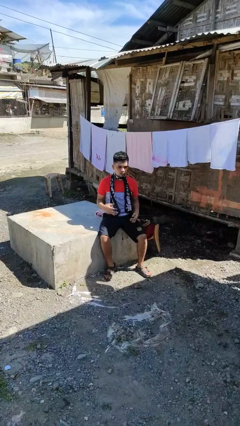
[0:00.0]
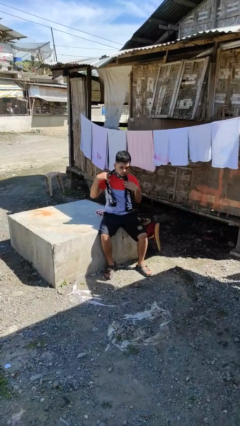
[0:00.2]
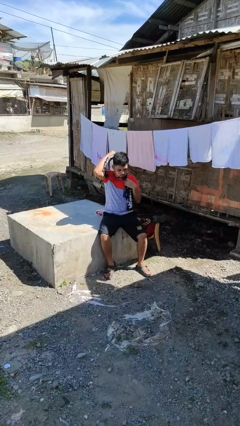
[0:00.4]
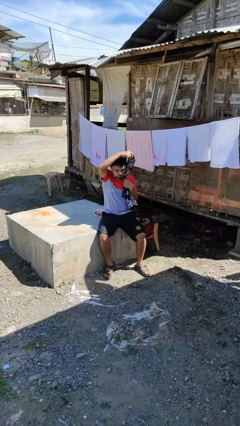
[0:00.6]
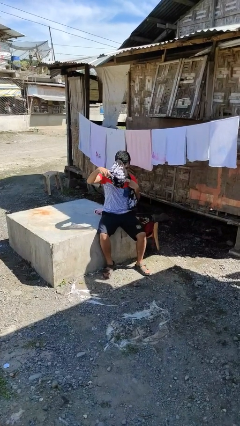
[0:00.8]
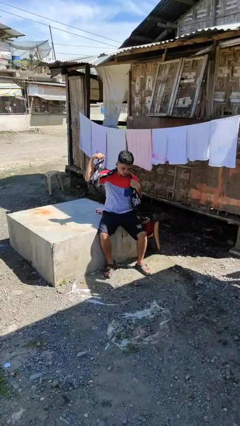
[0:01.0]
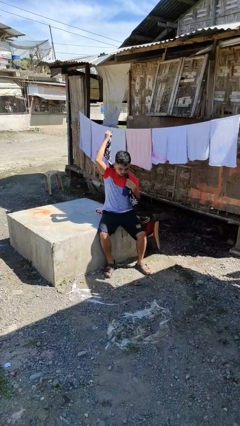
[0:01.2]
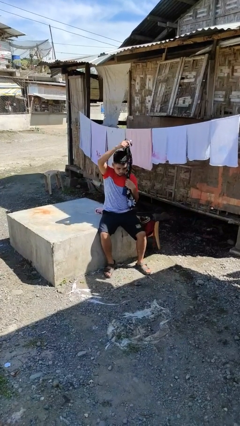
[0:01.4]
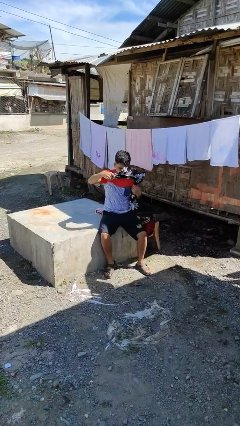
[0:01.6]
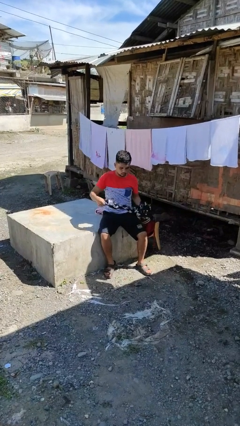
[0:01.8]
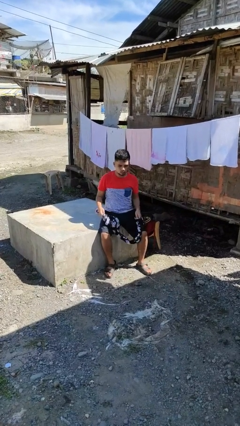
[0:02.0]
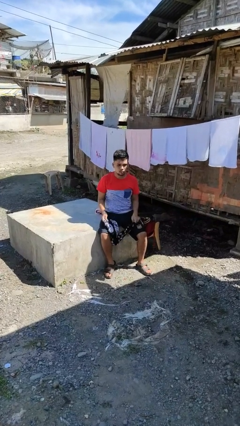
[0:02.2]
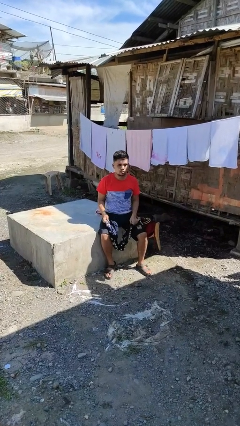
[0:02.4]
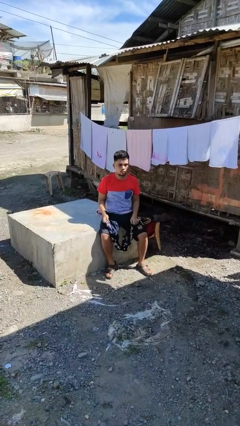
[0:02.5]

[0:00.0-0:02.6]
person takes off scarf

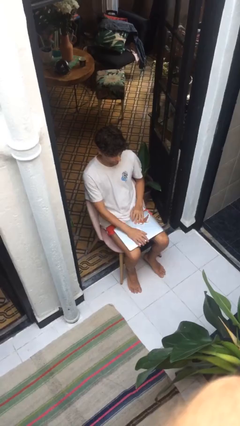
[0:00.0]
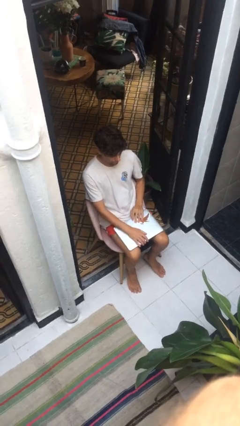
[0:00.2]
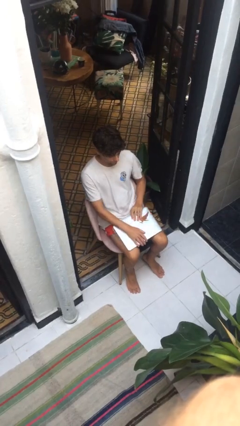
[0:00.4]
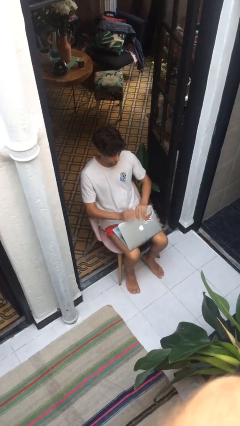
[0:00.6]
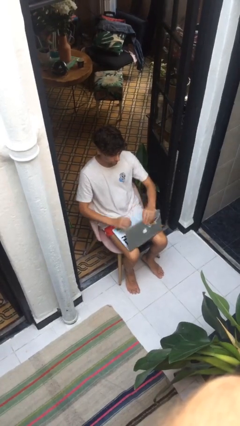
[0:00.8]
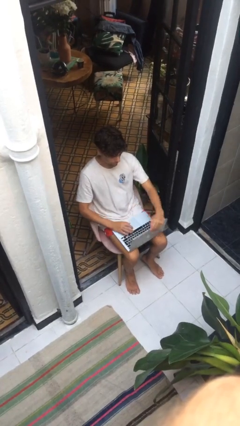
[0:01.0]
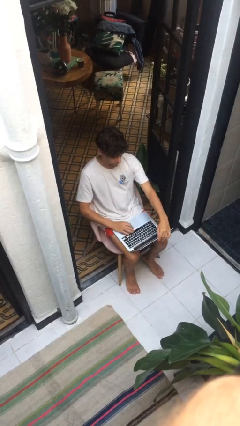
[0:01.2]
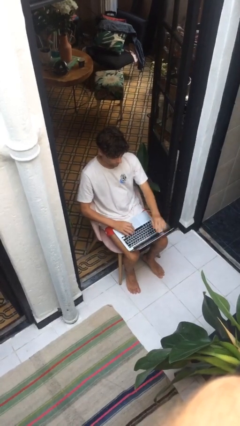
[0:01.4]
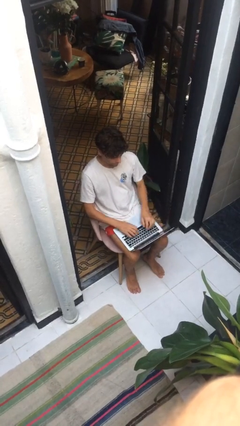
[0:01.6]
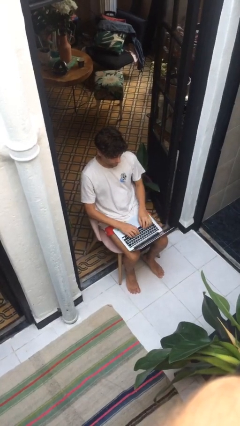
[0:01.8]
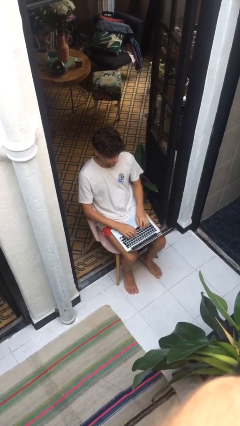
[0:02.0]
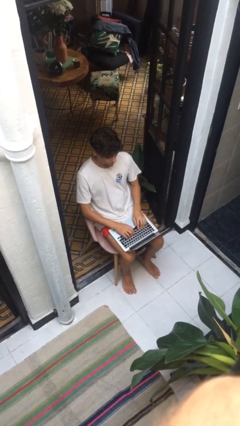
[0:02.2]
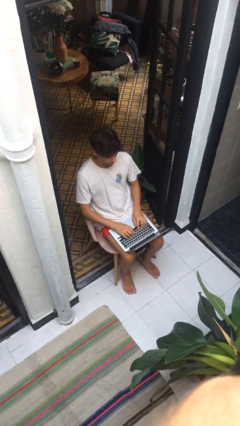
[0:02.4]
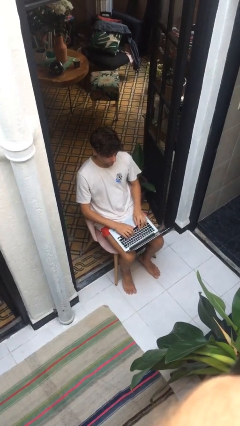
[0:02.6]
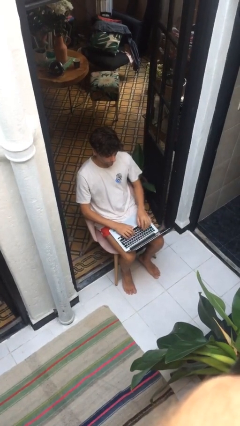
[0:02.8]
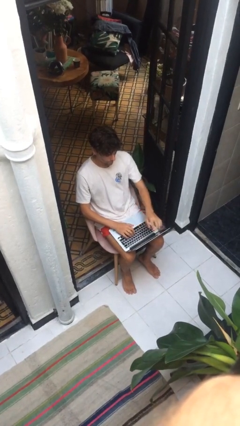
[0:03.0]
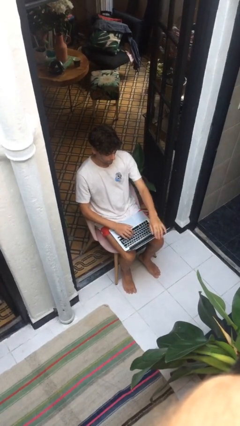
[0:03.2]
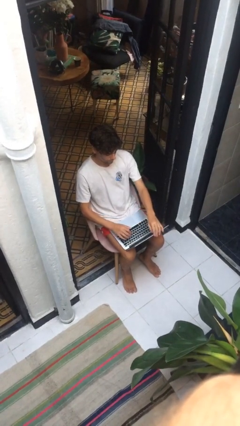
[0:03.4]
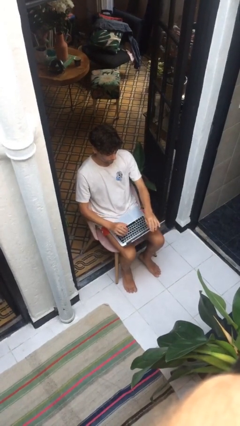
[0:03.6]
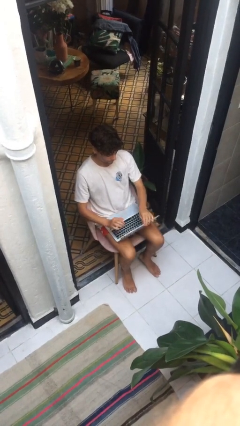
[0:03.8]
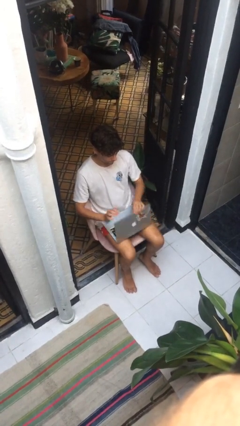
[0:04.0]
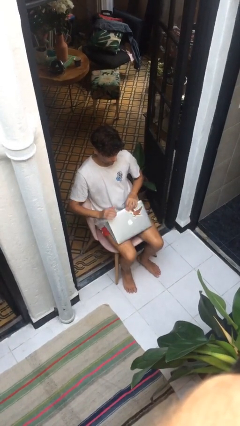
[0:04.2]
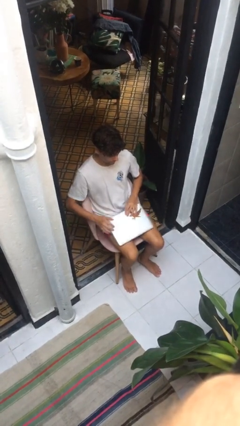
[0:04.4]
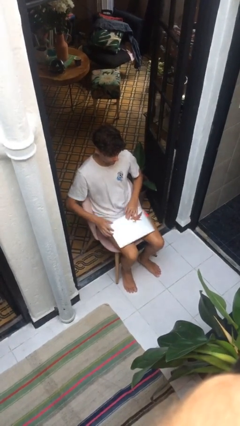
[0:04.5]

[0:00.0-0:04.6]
person interacts with laptop

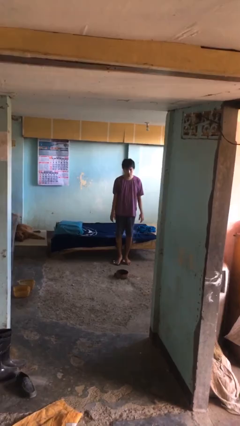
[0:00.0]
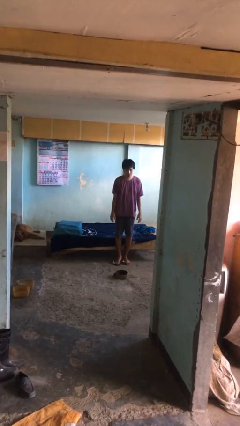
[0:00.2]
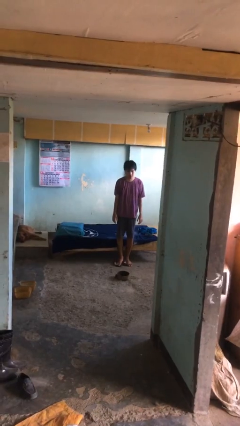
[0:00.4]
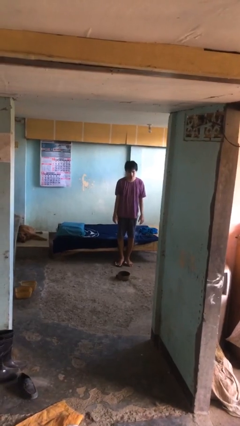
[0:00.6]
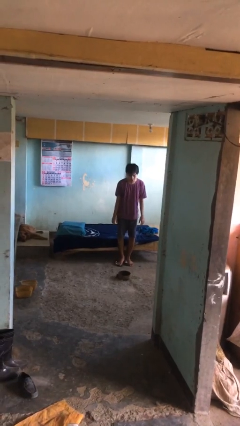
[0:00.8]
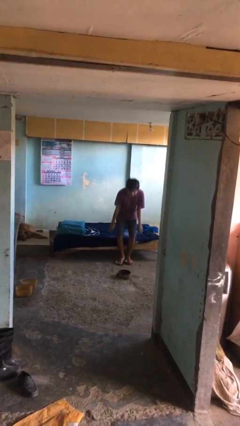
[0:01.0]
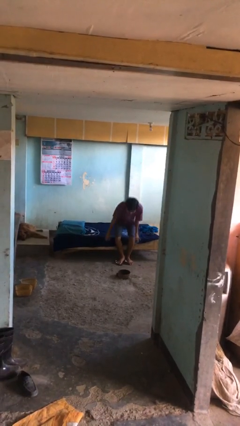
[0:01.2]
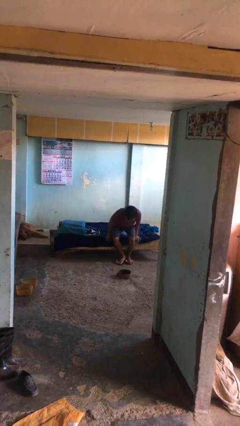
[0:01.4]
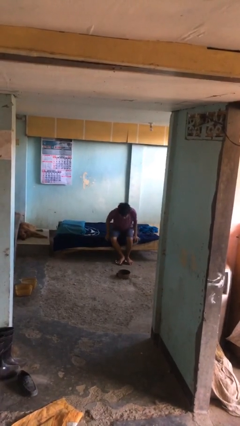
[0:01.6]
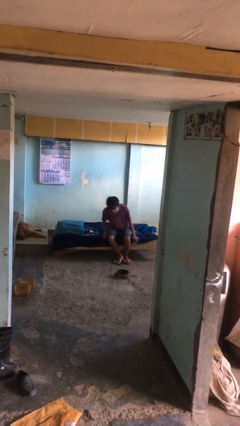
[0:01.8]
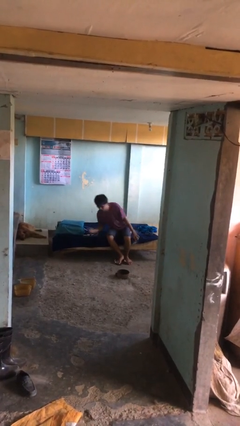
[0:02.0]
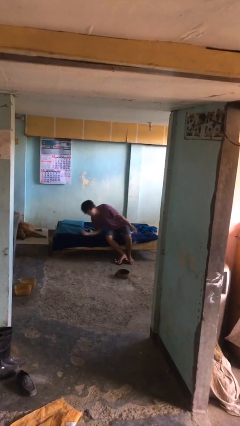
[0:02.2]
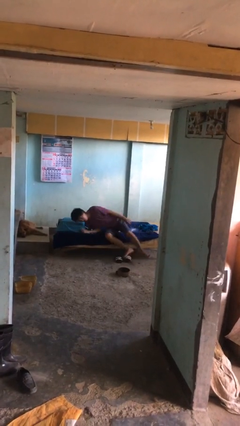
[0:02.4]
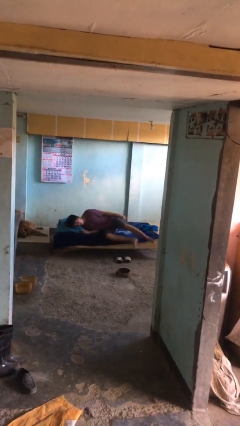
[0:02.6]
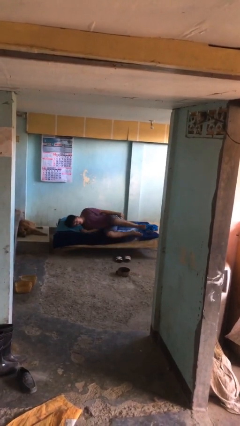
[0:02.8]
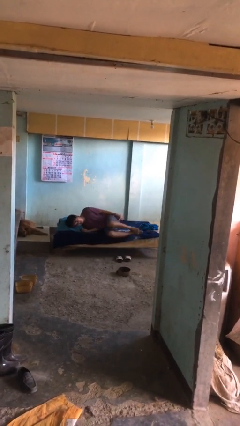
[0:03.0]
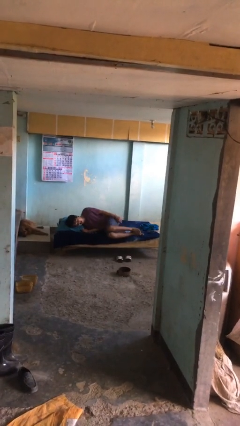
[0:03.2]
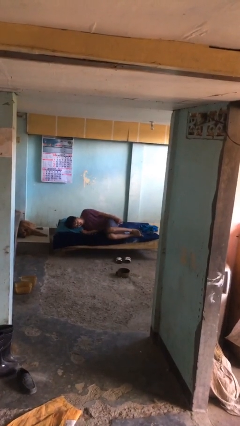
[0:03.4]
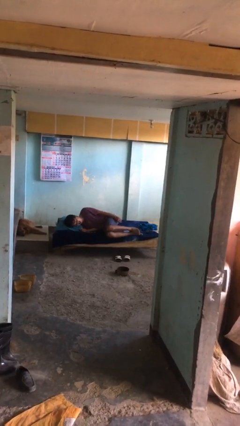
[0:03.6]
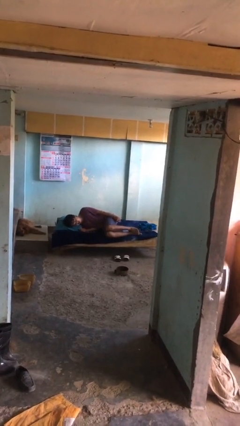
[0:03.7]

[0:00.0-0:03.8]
person lies down on bed

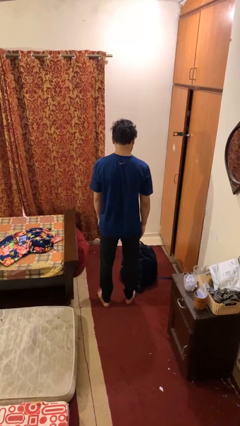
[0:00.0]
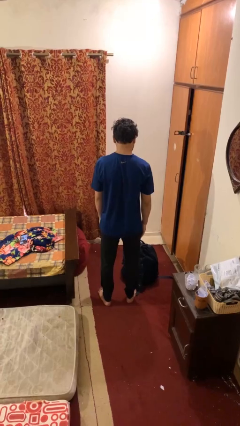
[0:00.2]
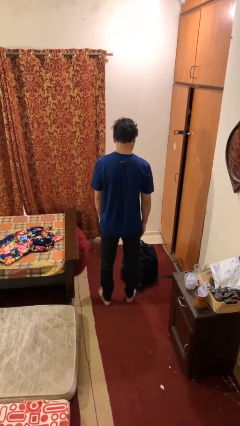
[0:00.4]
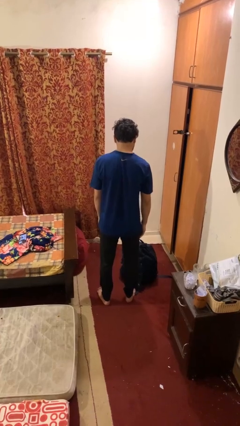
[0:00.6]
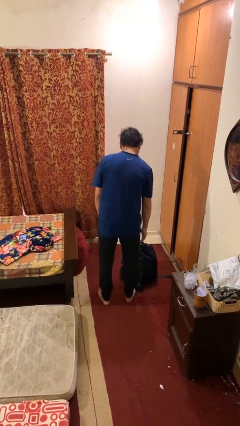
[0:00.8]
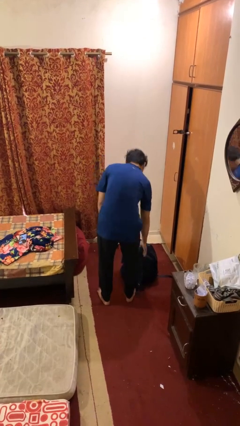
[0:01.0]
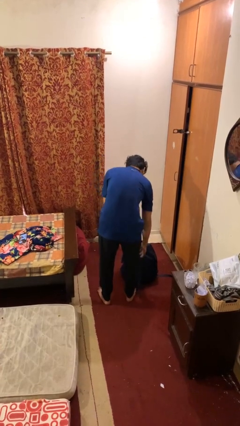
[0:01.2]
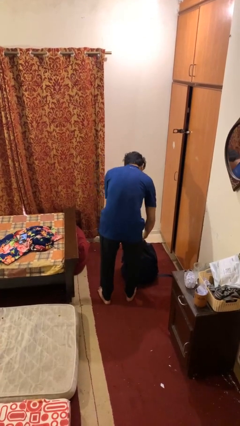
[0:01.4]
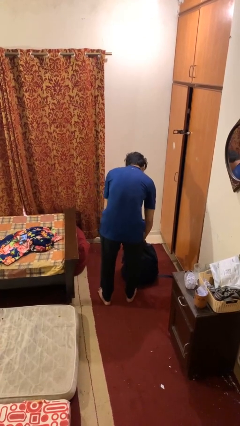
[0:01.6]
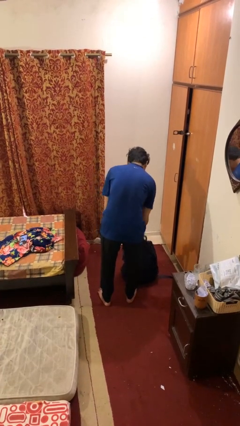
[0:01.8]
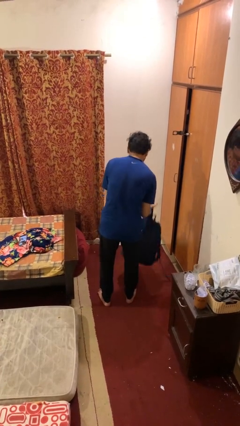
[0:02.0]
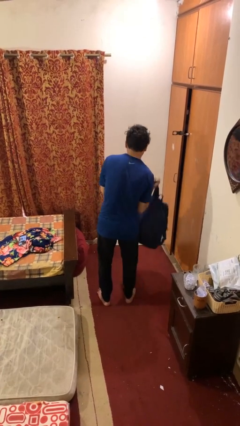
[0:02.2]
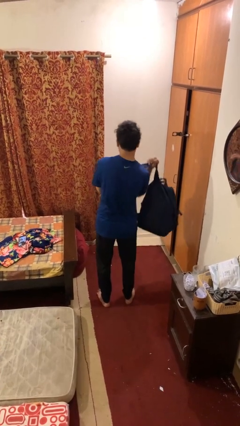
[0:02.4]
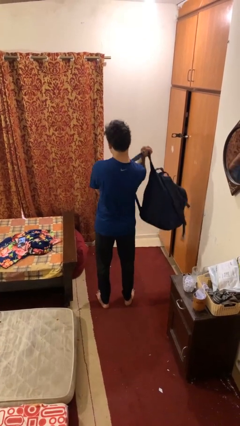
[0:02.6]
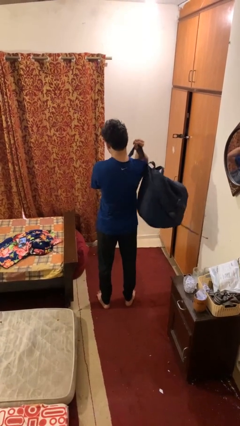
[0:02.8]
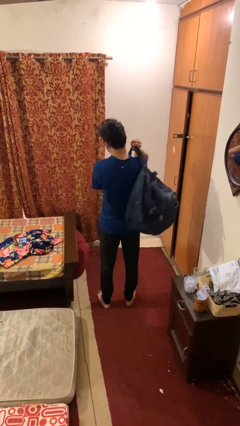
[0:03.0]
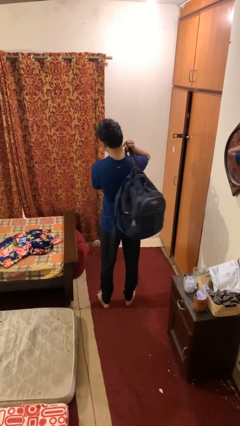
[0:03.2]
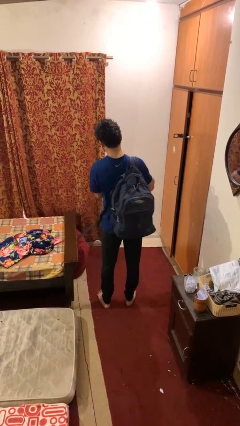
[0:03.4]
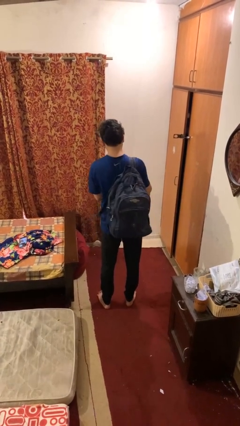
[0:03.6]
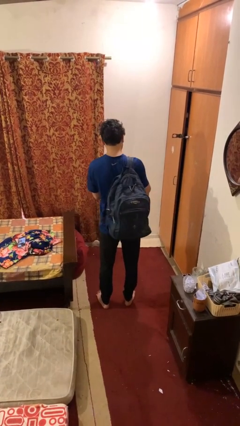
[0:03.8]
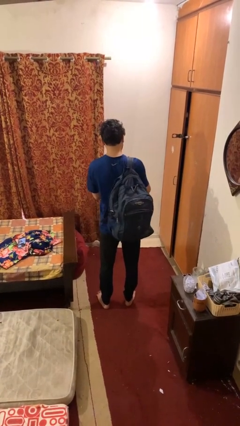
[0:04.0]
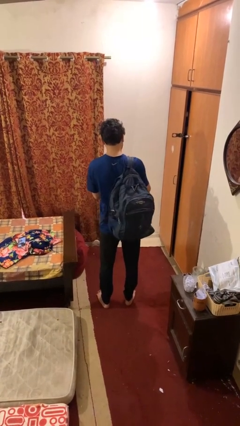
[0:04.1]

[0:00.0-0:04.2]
person puts on backpack

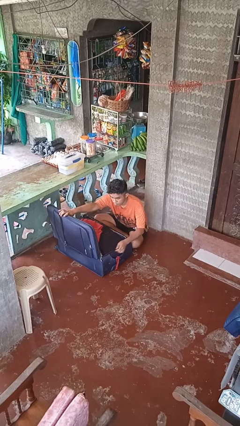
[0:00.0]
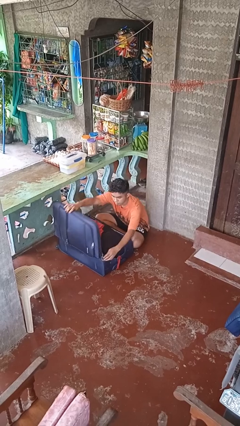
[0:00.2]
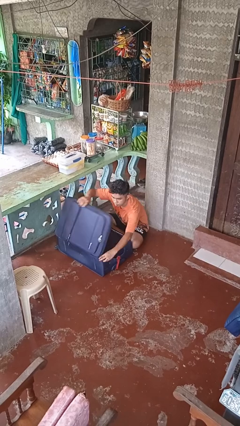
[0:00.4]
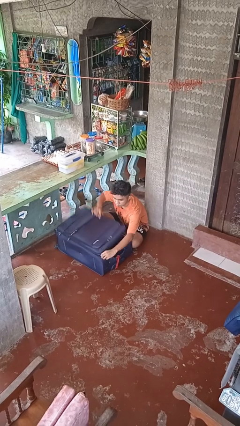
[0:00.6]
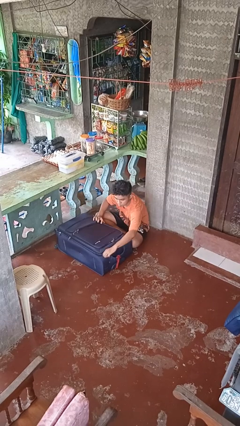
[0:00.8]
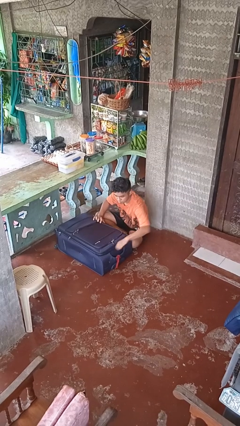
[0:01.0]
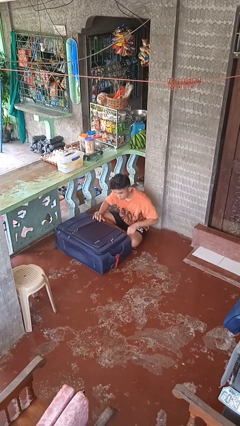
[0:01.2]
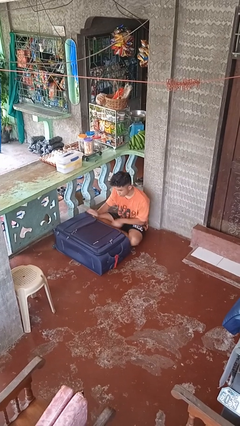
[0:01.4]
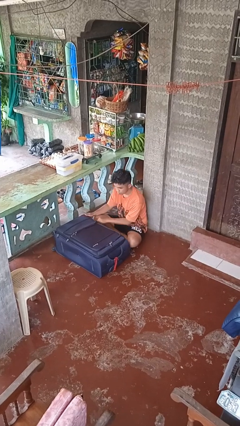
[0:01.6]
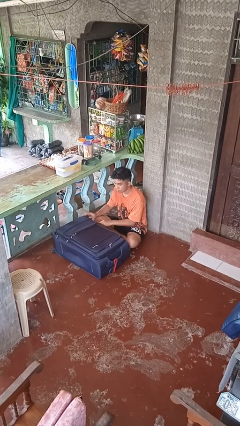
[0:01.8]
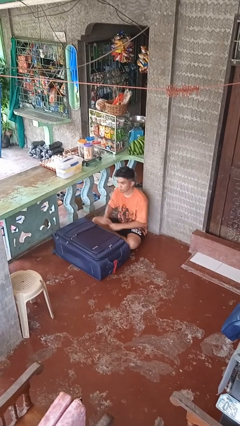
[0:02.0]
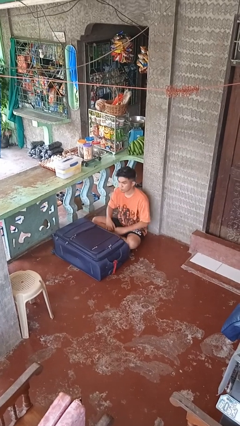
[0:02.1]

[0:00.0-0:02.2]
person closes suitcase

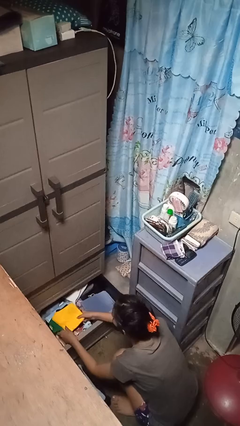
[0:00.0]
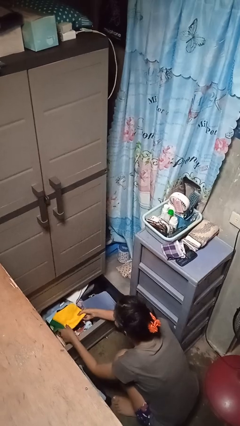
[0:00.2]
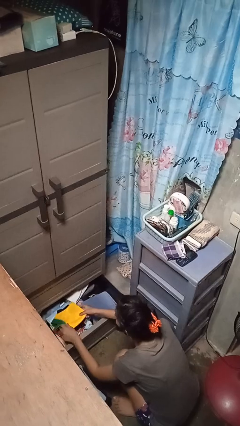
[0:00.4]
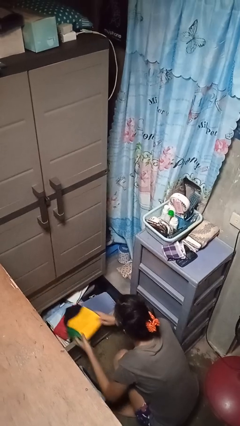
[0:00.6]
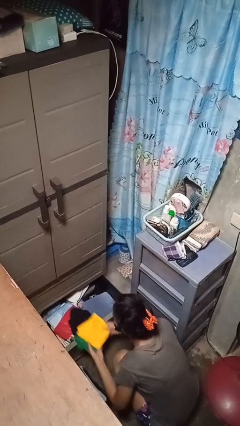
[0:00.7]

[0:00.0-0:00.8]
person takes clothes from dresser
